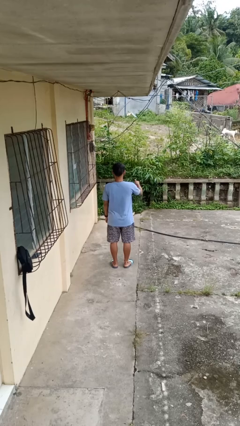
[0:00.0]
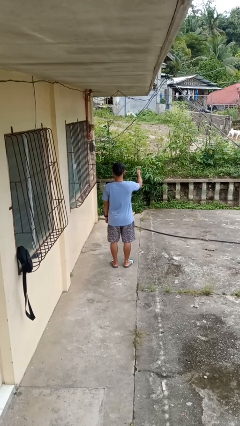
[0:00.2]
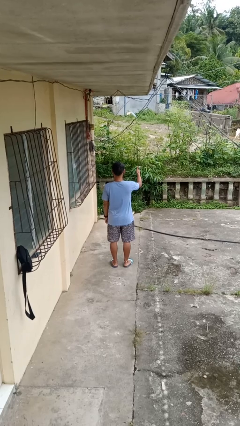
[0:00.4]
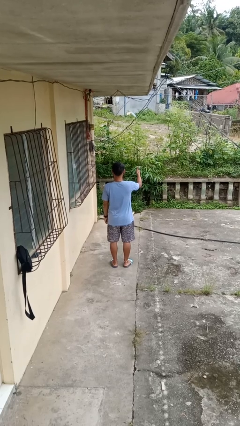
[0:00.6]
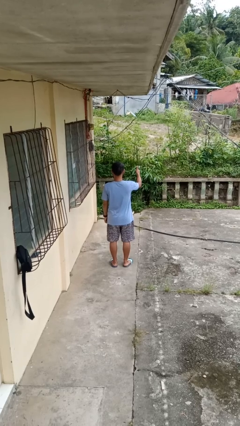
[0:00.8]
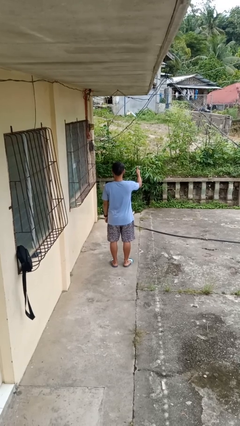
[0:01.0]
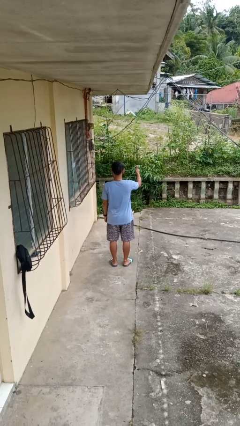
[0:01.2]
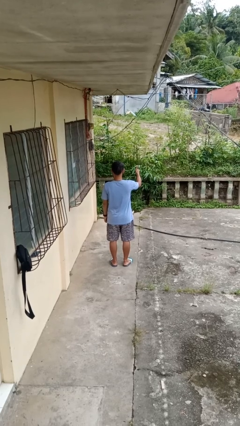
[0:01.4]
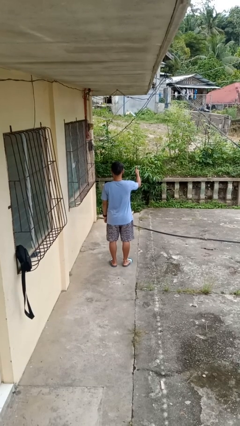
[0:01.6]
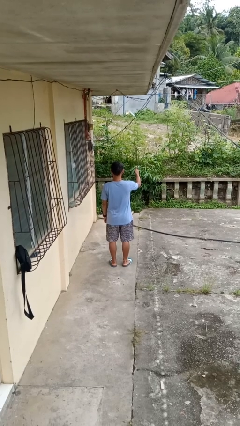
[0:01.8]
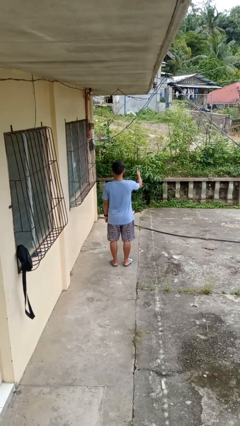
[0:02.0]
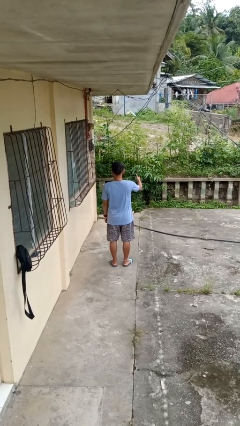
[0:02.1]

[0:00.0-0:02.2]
person gestures thumbs up

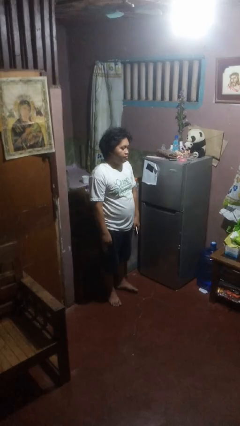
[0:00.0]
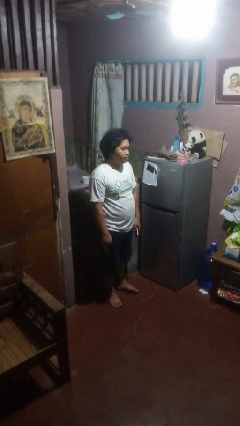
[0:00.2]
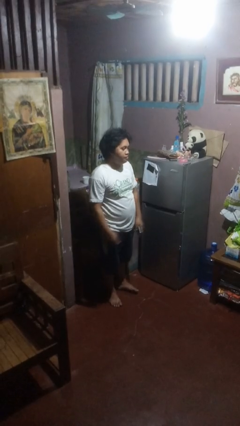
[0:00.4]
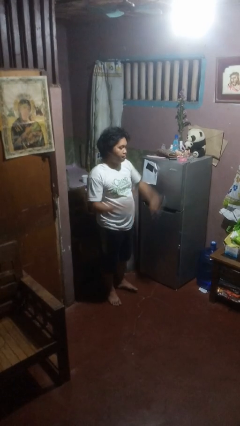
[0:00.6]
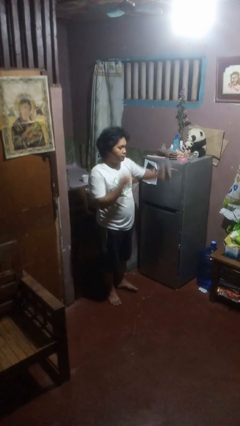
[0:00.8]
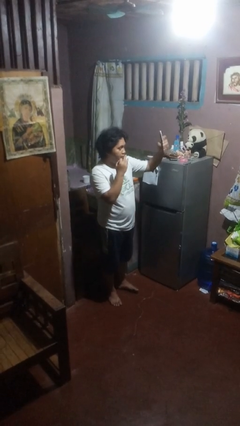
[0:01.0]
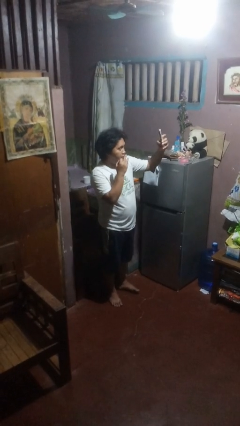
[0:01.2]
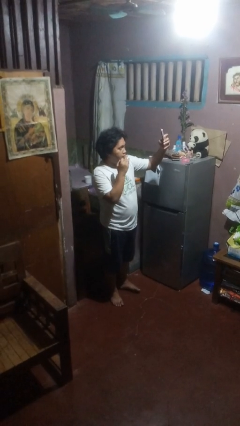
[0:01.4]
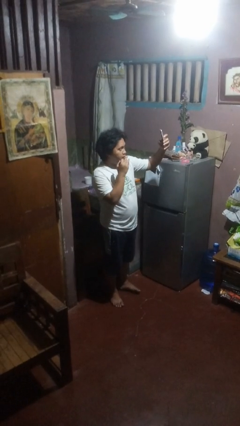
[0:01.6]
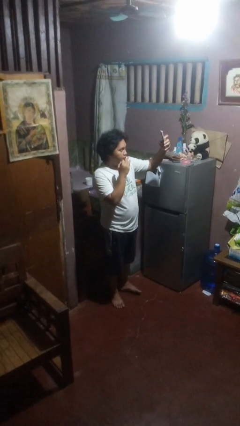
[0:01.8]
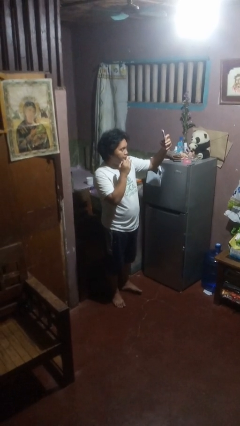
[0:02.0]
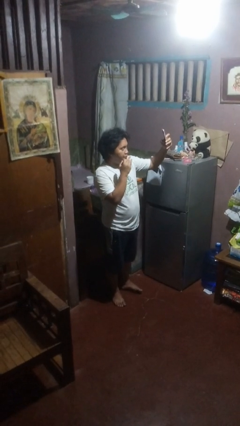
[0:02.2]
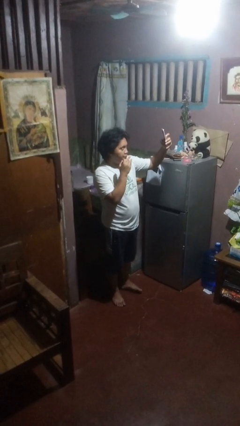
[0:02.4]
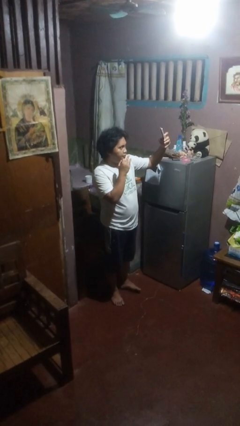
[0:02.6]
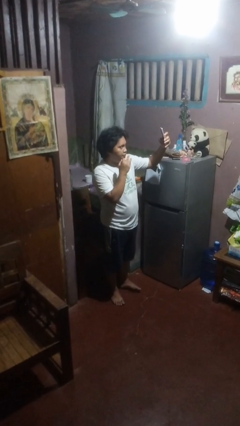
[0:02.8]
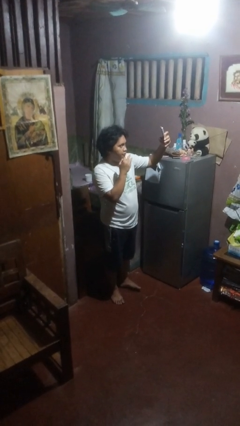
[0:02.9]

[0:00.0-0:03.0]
person takes selfie

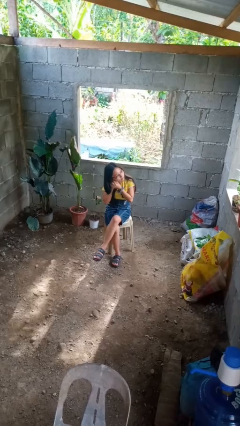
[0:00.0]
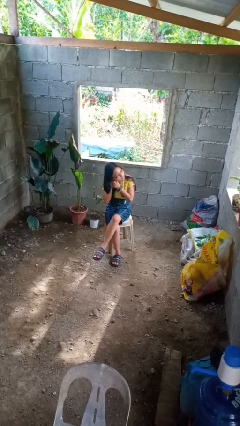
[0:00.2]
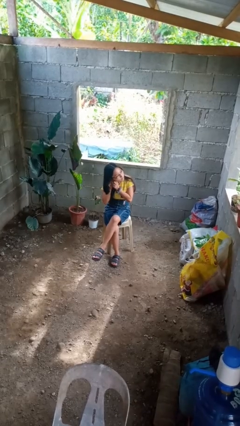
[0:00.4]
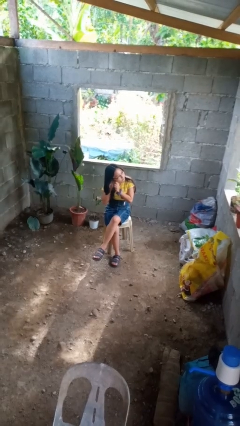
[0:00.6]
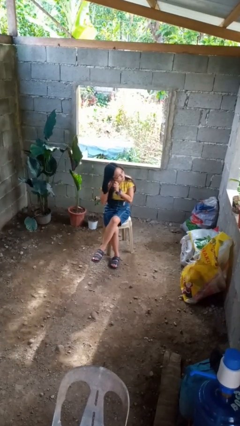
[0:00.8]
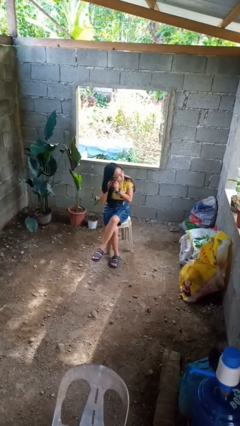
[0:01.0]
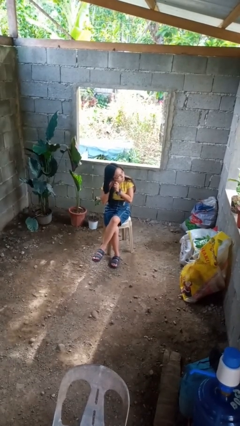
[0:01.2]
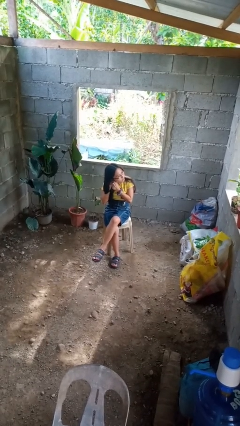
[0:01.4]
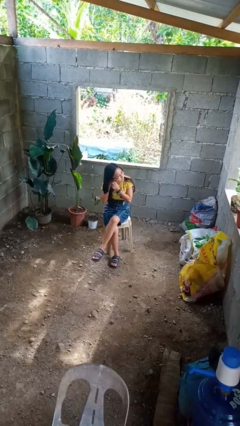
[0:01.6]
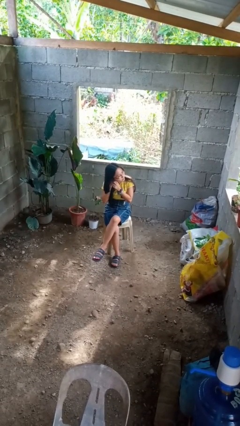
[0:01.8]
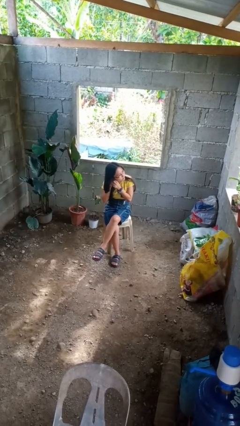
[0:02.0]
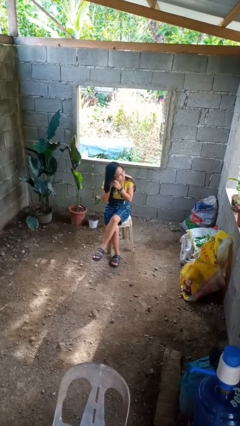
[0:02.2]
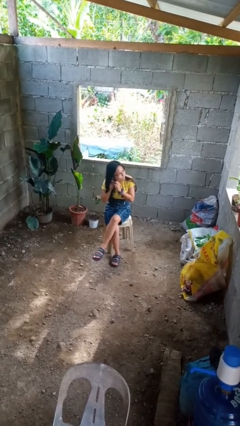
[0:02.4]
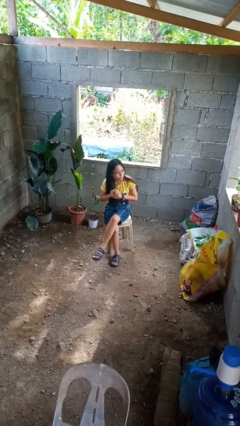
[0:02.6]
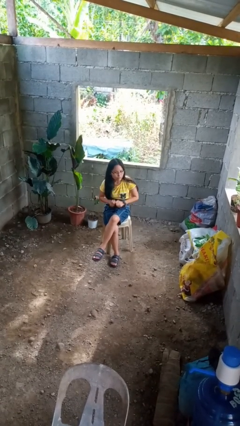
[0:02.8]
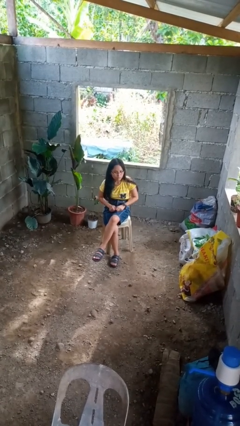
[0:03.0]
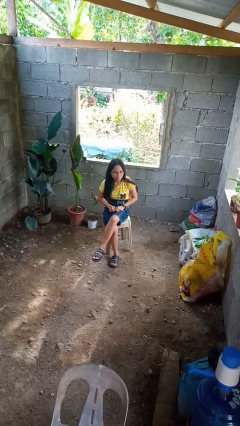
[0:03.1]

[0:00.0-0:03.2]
person puts on earrings

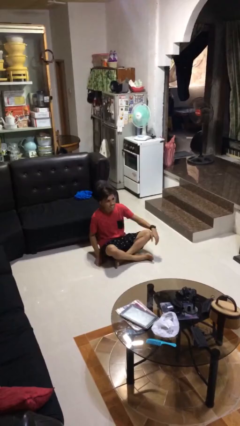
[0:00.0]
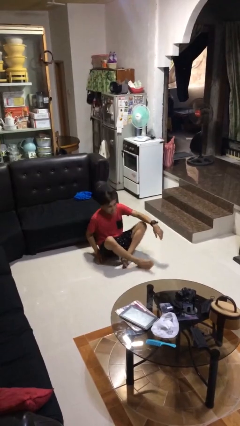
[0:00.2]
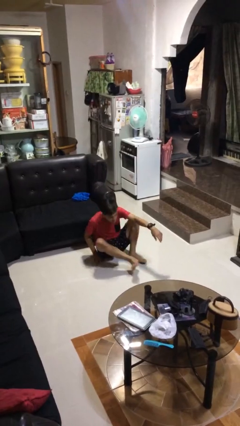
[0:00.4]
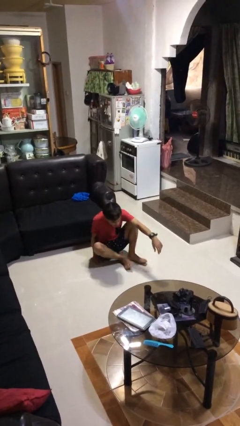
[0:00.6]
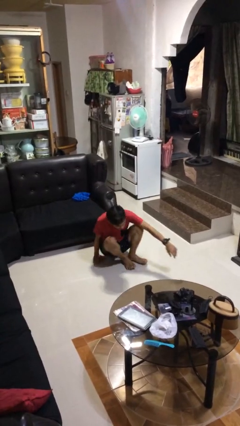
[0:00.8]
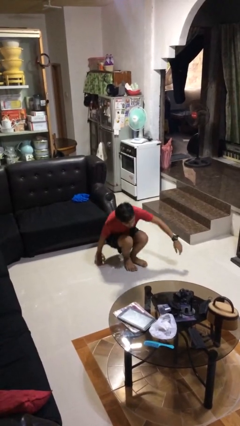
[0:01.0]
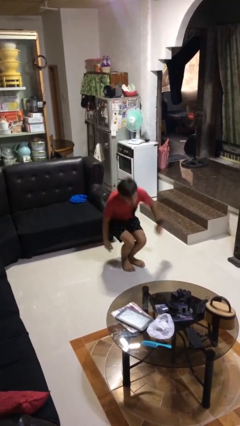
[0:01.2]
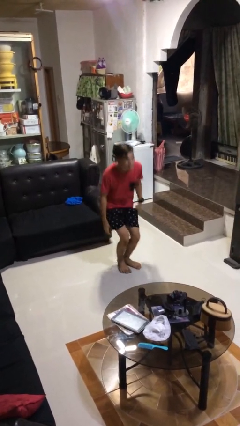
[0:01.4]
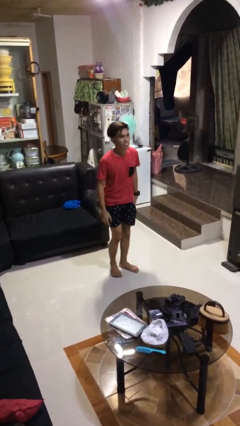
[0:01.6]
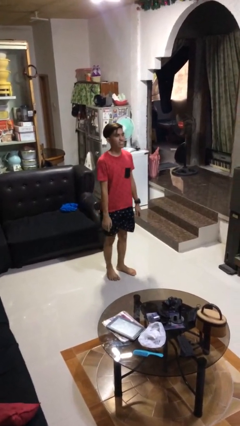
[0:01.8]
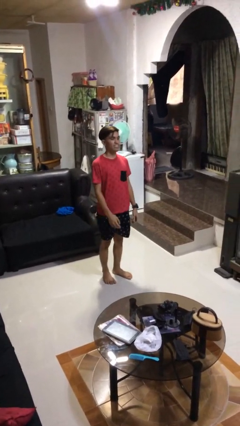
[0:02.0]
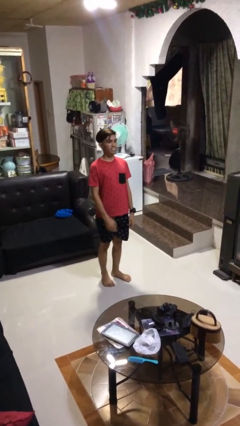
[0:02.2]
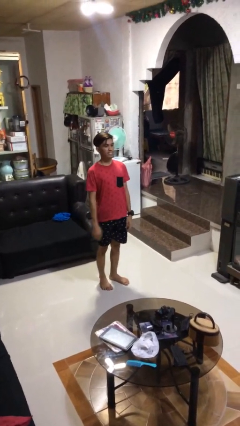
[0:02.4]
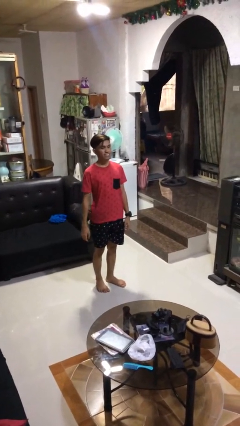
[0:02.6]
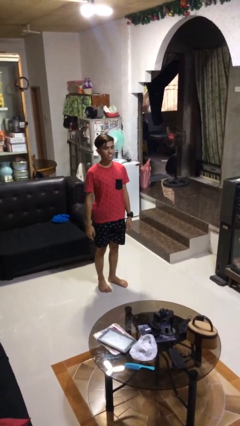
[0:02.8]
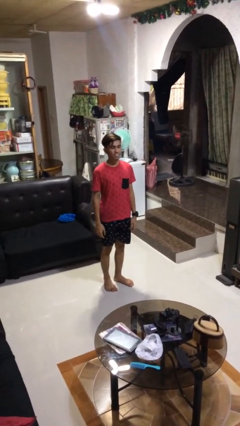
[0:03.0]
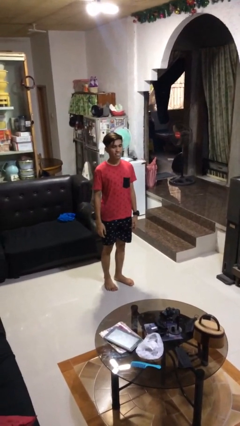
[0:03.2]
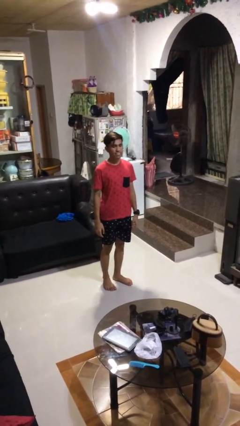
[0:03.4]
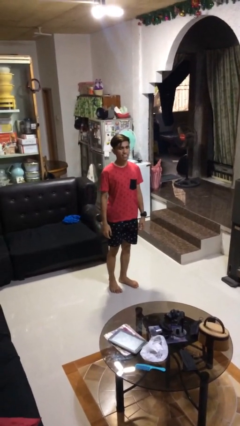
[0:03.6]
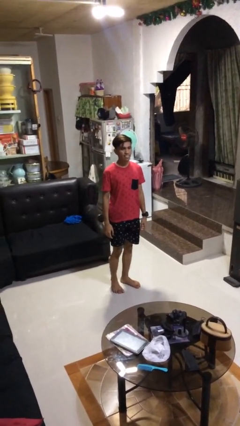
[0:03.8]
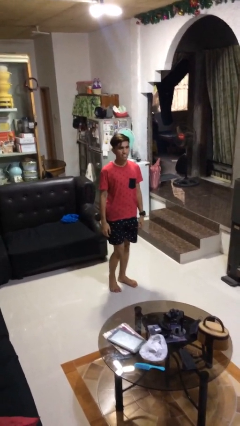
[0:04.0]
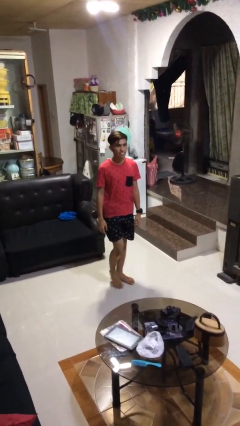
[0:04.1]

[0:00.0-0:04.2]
person stands up from floor

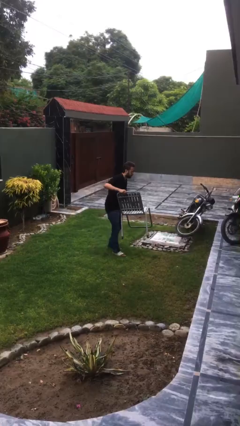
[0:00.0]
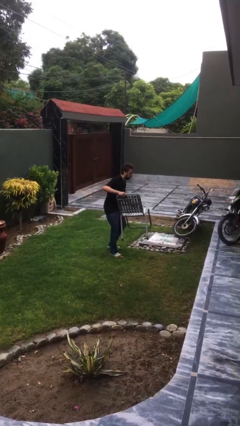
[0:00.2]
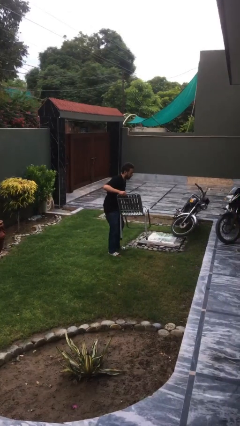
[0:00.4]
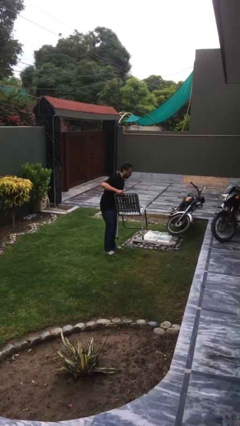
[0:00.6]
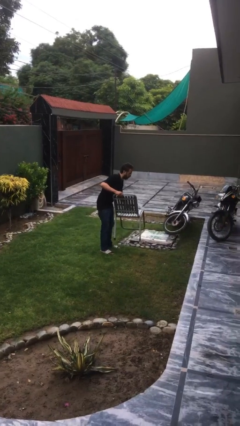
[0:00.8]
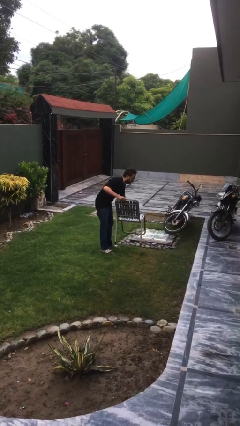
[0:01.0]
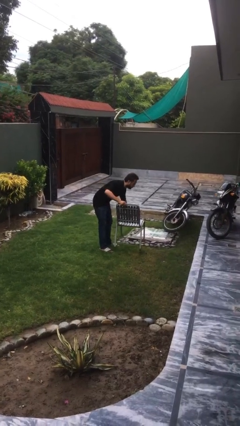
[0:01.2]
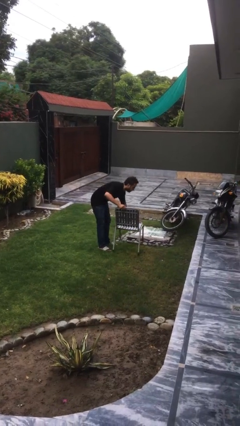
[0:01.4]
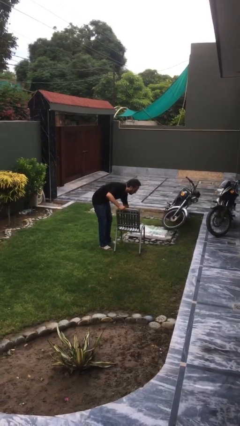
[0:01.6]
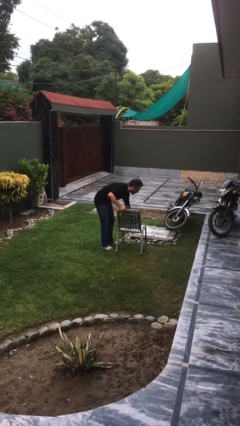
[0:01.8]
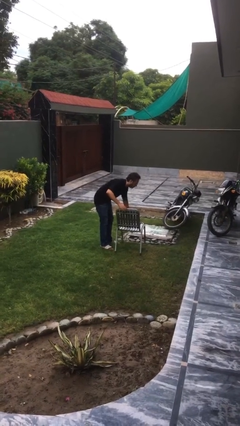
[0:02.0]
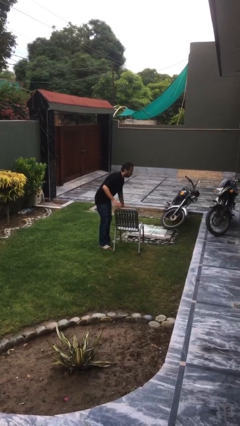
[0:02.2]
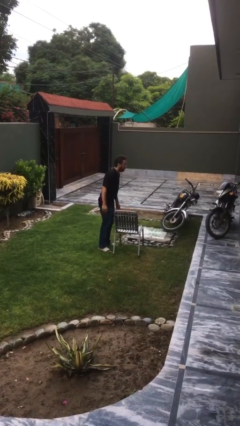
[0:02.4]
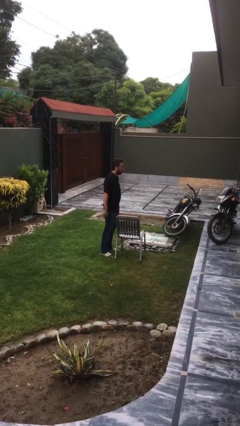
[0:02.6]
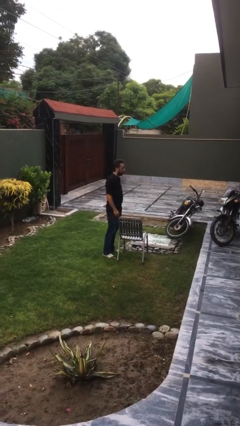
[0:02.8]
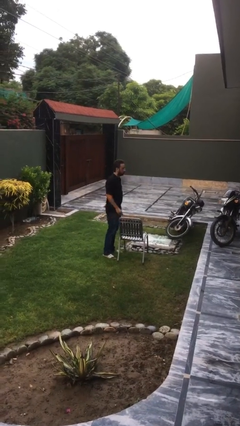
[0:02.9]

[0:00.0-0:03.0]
person puts down object on floor

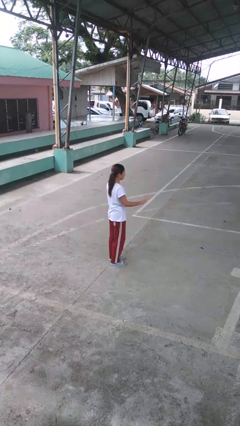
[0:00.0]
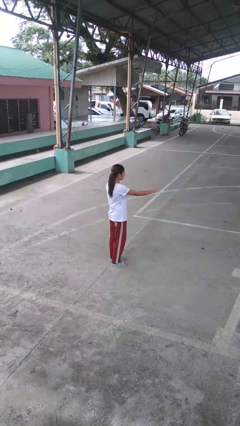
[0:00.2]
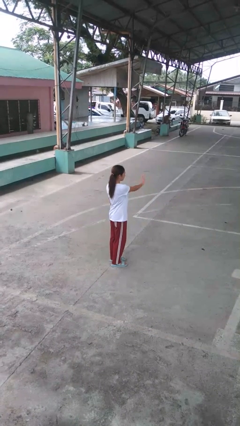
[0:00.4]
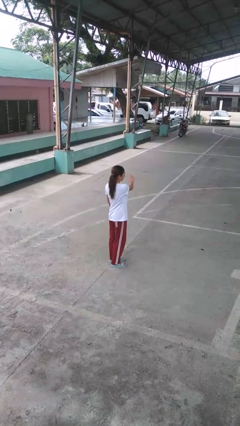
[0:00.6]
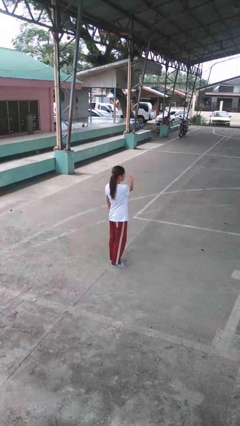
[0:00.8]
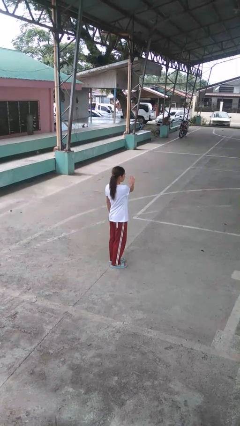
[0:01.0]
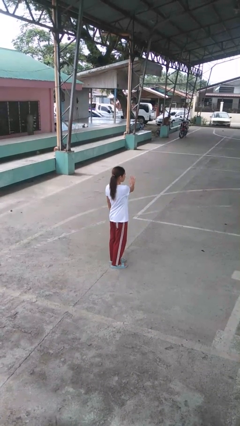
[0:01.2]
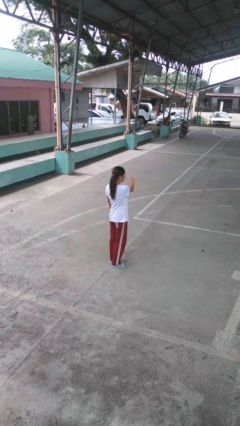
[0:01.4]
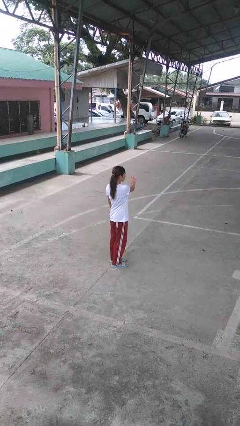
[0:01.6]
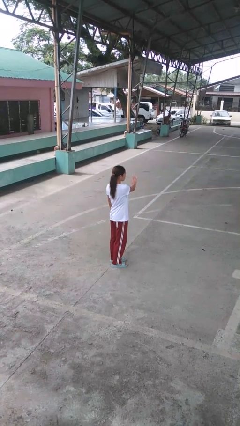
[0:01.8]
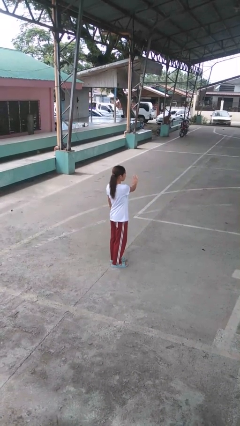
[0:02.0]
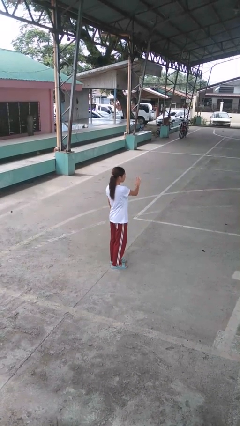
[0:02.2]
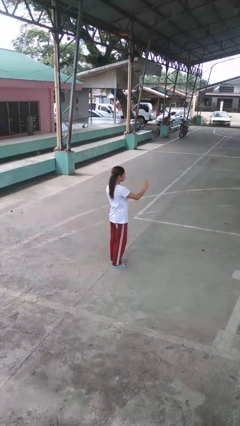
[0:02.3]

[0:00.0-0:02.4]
person gestures swipe left
